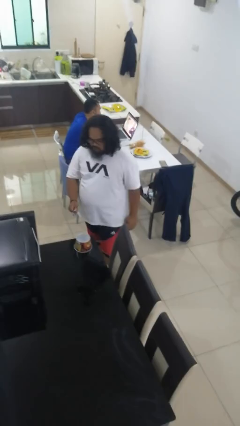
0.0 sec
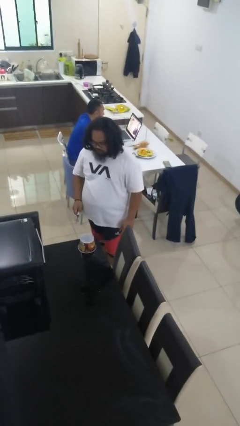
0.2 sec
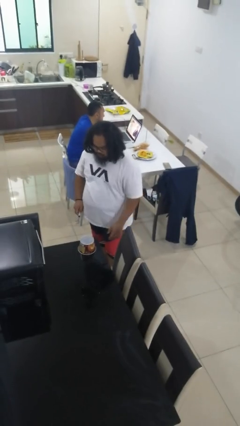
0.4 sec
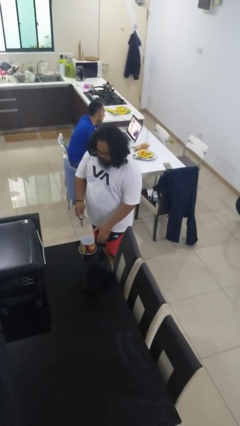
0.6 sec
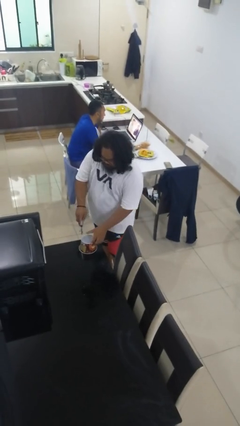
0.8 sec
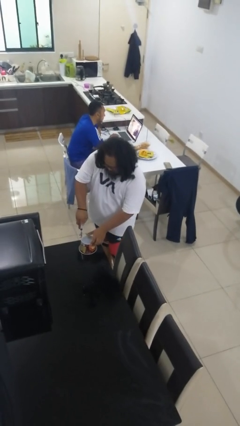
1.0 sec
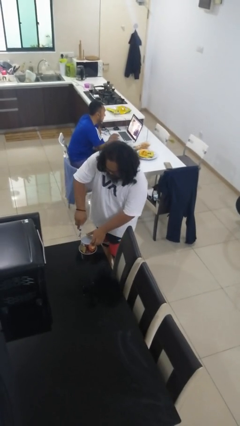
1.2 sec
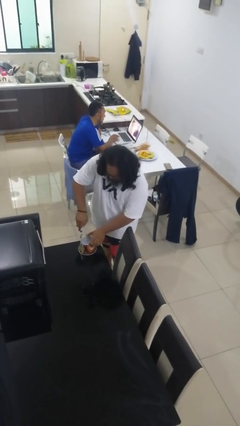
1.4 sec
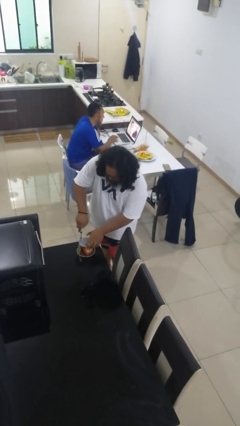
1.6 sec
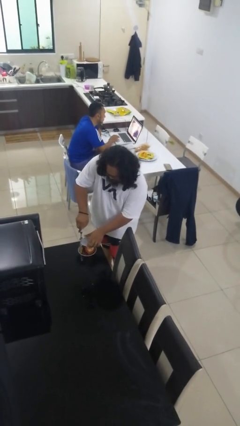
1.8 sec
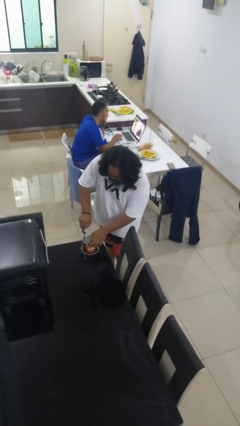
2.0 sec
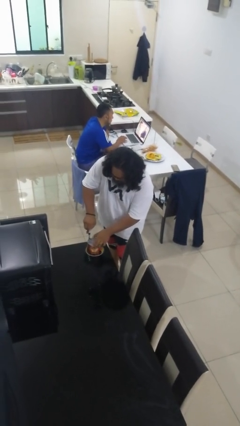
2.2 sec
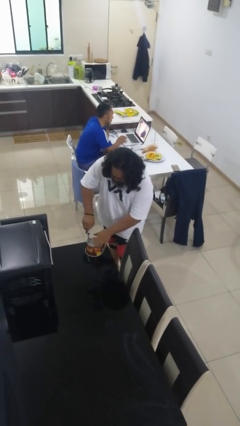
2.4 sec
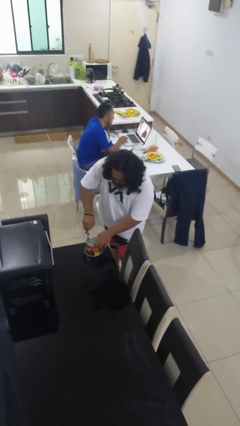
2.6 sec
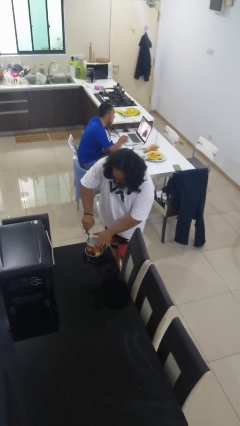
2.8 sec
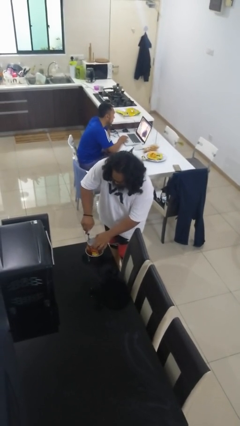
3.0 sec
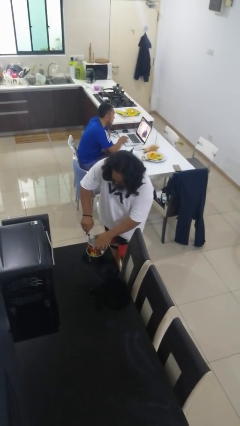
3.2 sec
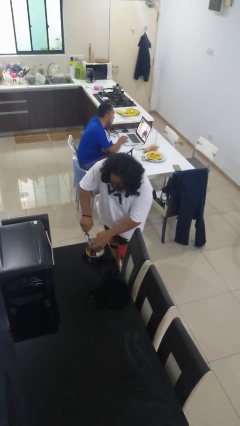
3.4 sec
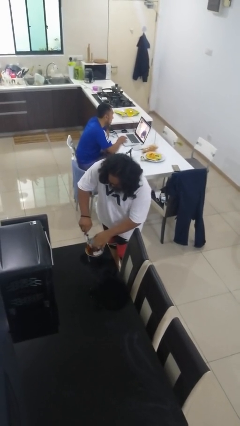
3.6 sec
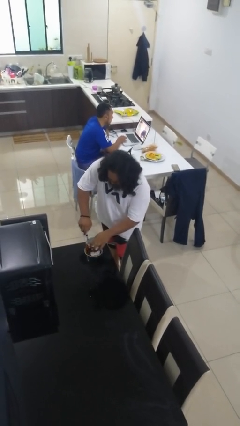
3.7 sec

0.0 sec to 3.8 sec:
person opens can with can opener

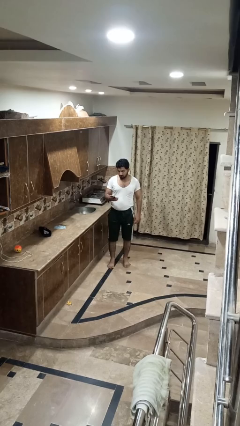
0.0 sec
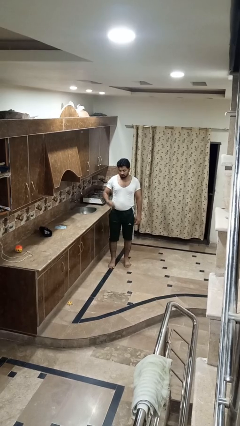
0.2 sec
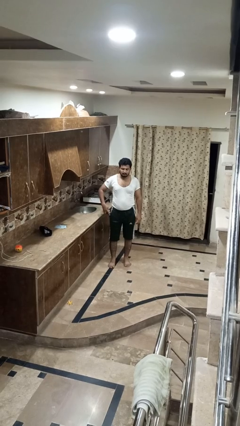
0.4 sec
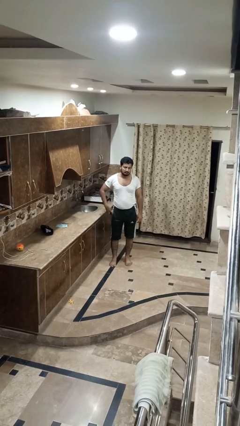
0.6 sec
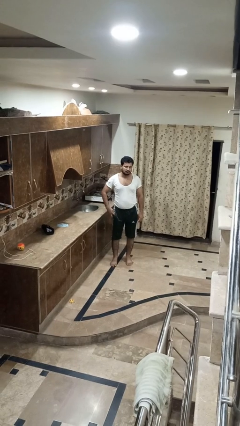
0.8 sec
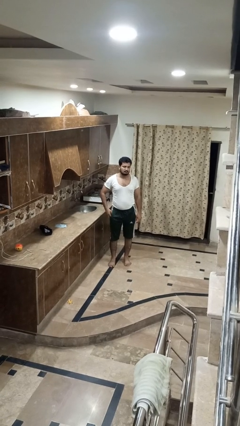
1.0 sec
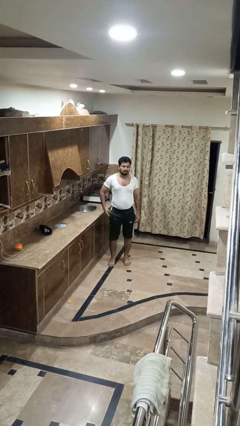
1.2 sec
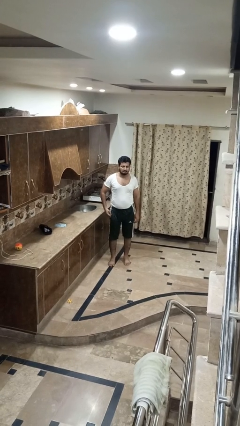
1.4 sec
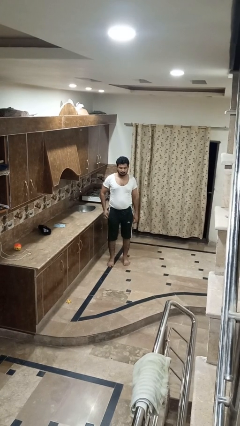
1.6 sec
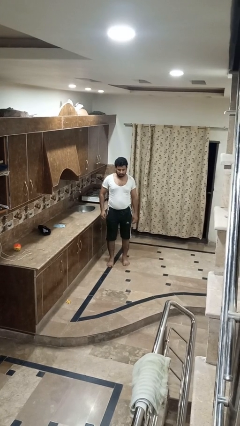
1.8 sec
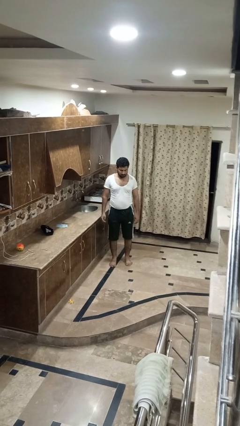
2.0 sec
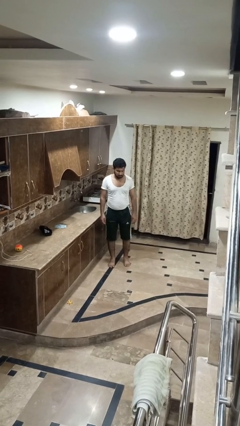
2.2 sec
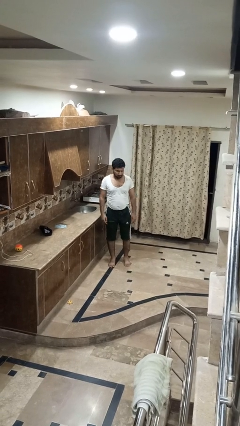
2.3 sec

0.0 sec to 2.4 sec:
person puts phone into pocket

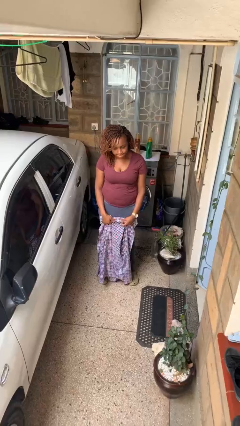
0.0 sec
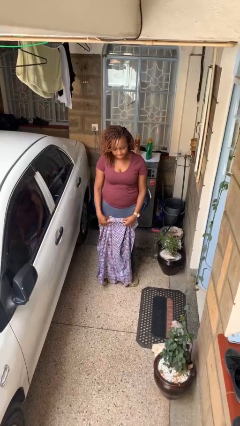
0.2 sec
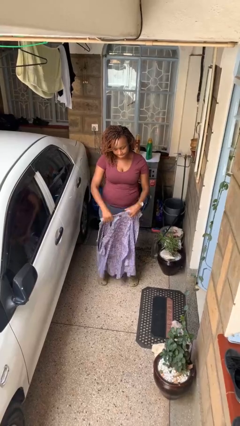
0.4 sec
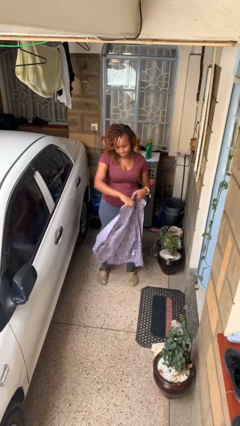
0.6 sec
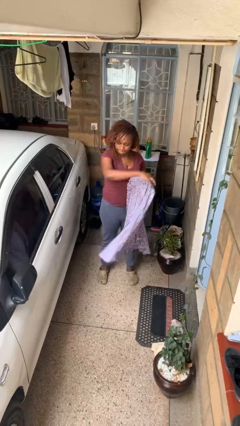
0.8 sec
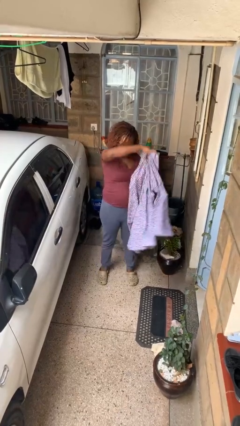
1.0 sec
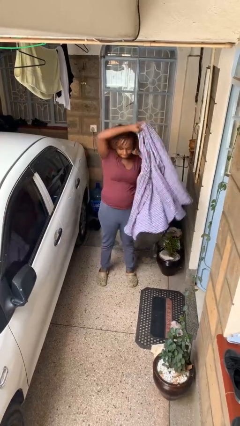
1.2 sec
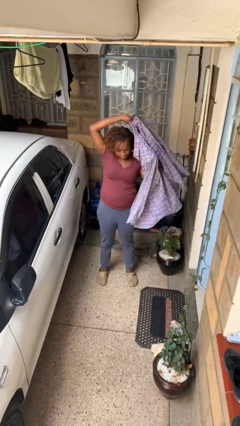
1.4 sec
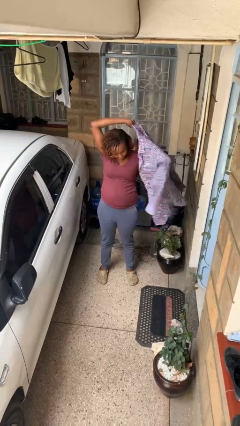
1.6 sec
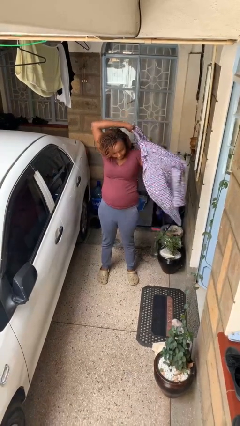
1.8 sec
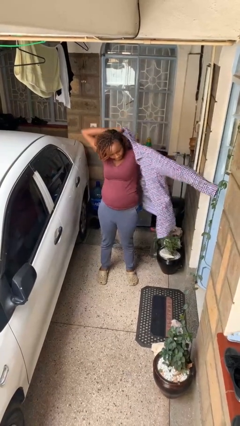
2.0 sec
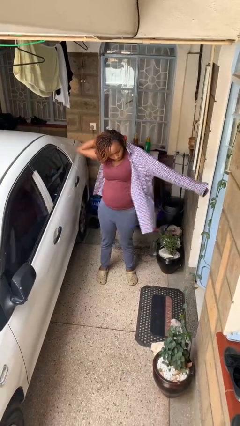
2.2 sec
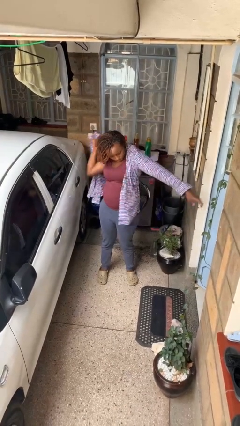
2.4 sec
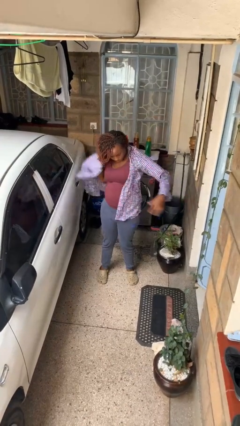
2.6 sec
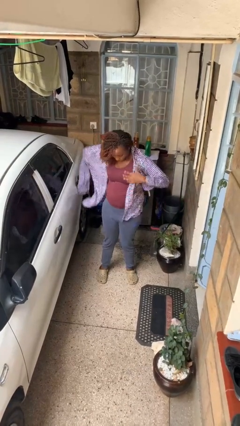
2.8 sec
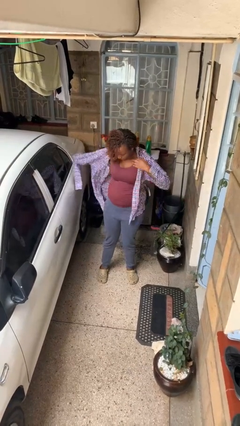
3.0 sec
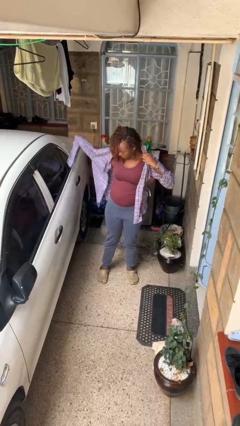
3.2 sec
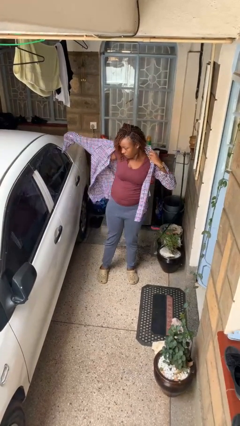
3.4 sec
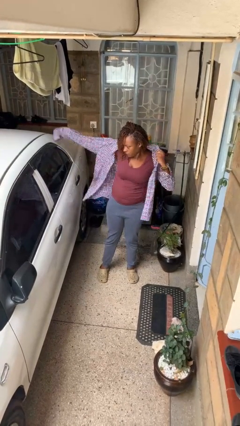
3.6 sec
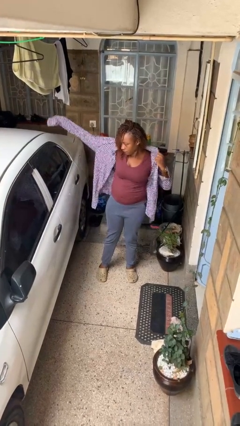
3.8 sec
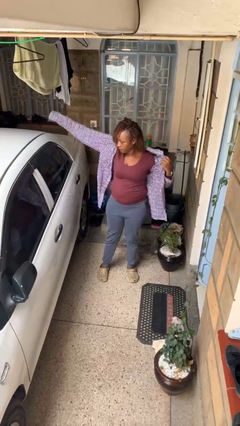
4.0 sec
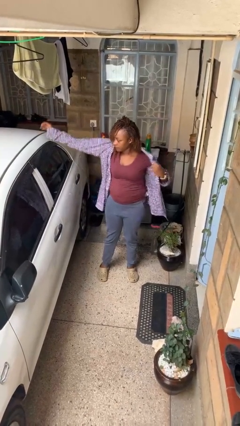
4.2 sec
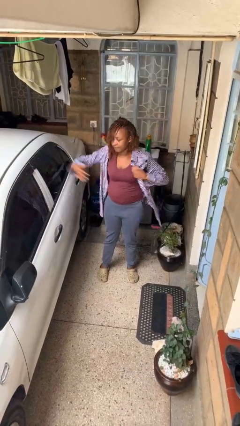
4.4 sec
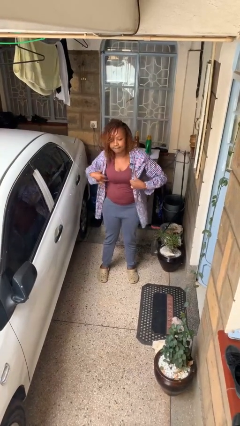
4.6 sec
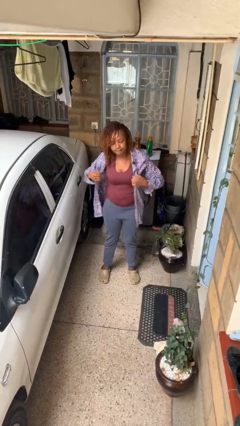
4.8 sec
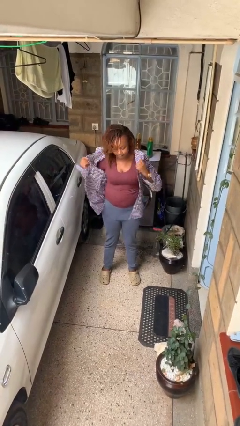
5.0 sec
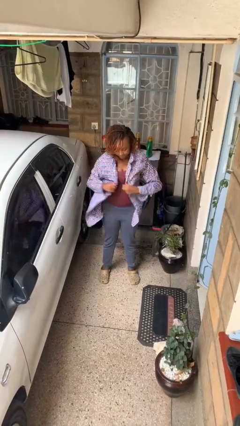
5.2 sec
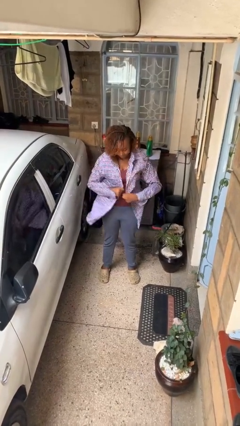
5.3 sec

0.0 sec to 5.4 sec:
person puts on shirt

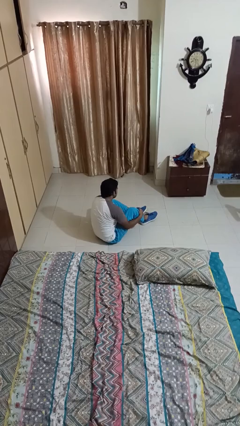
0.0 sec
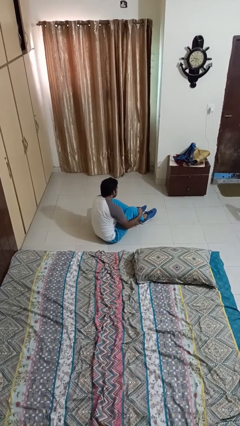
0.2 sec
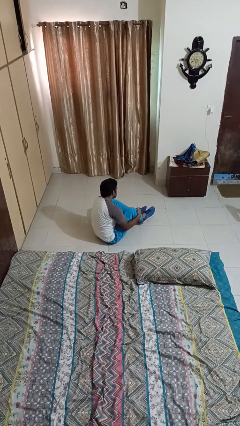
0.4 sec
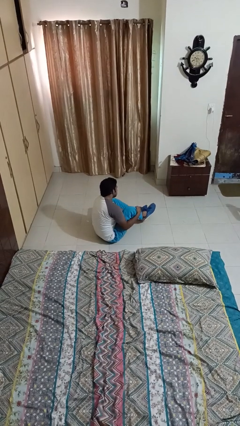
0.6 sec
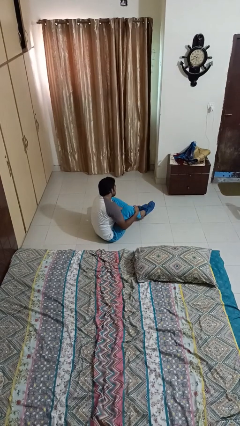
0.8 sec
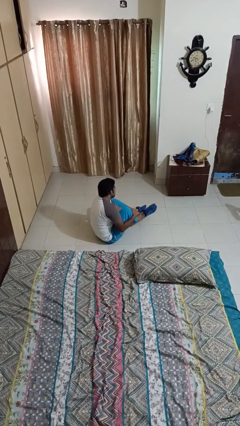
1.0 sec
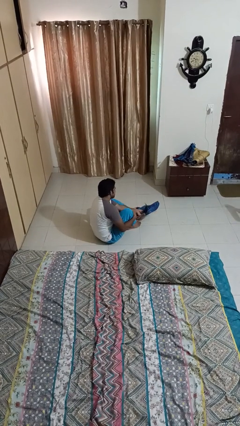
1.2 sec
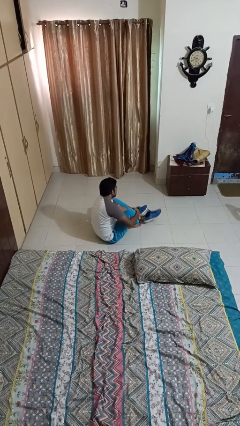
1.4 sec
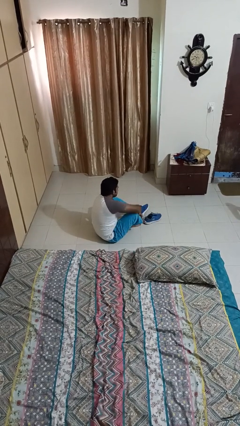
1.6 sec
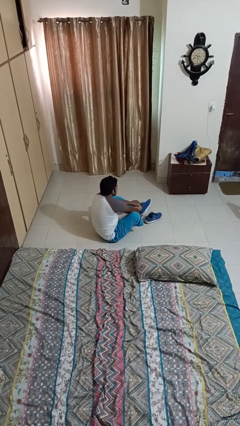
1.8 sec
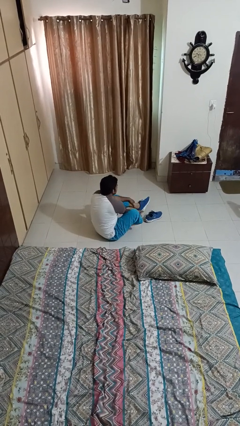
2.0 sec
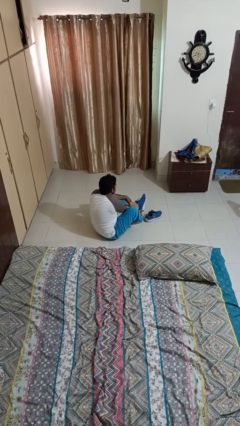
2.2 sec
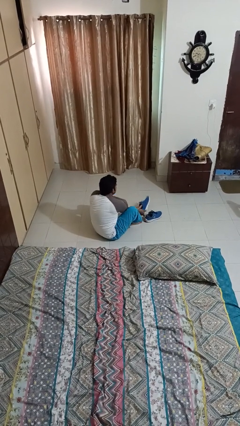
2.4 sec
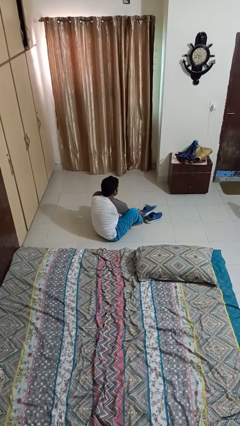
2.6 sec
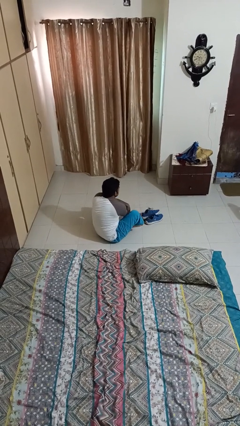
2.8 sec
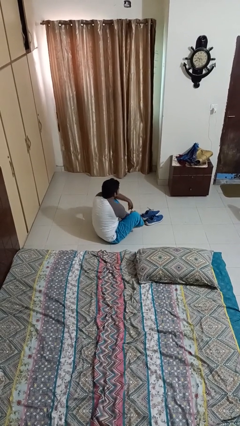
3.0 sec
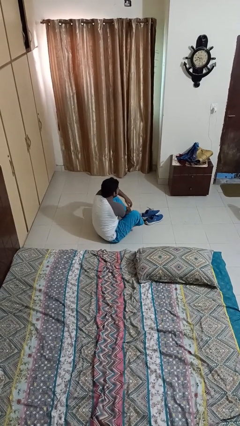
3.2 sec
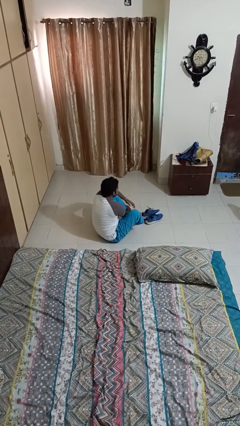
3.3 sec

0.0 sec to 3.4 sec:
person takes off shoes

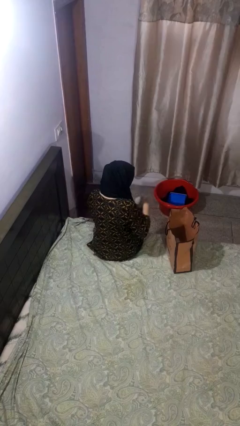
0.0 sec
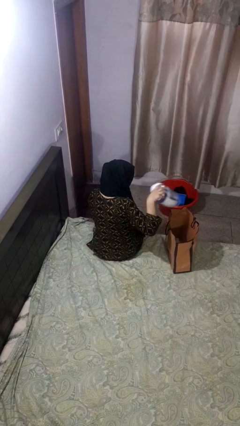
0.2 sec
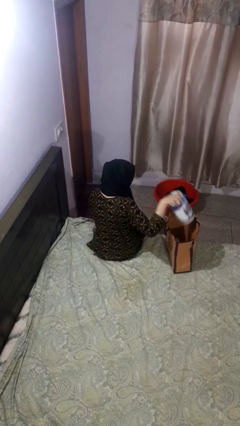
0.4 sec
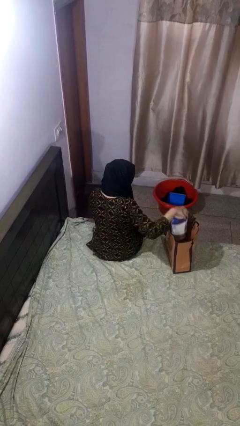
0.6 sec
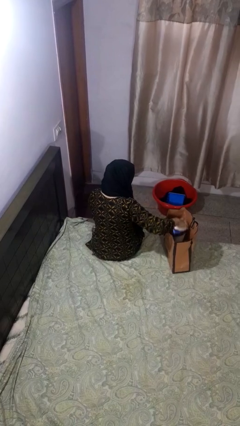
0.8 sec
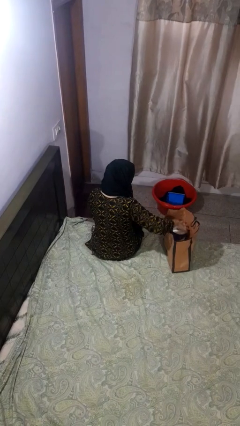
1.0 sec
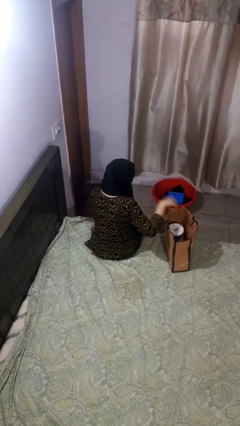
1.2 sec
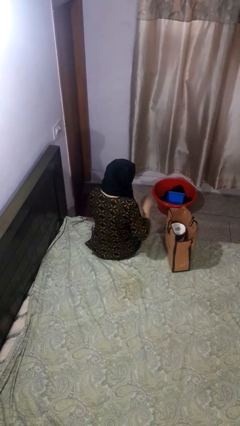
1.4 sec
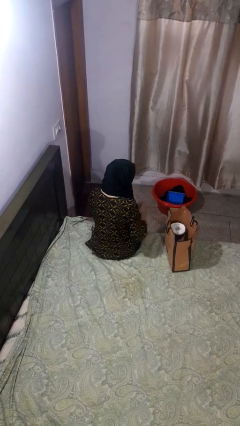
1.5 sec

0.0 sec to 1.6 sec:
person puts object into bag

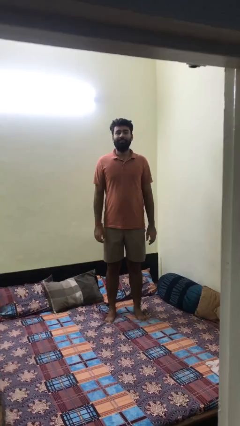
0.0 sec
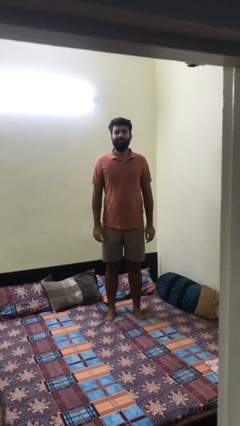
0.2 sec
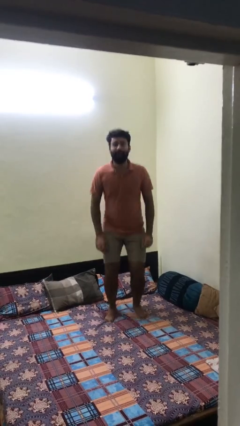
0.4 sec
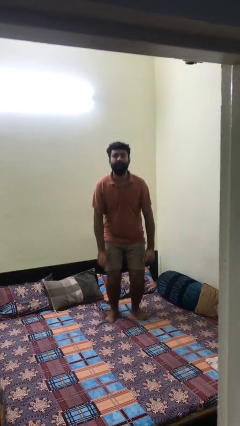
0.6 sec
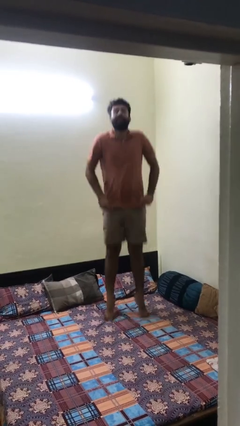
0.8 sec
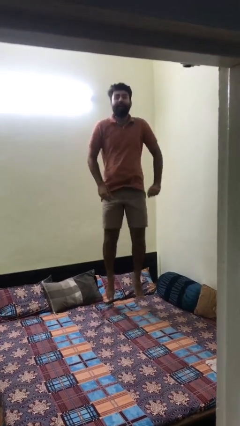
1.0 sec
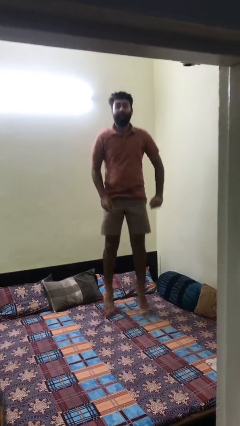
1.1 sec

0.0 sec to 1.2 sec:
person jumps on bed
